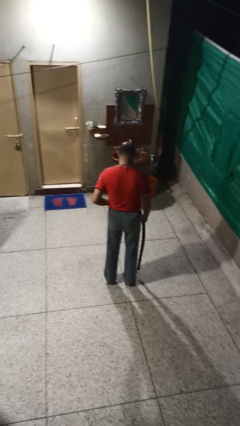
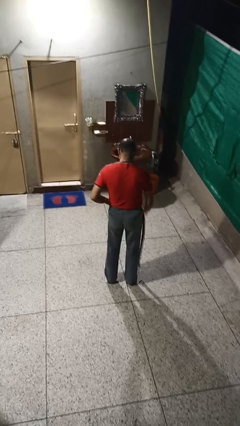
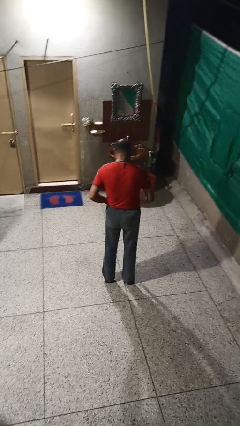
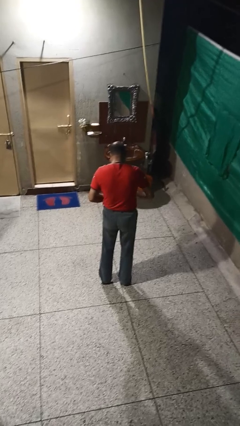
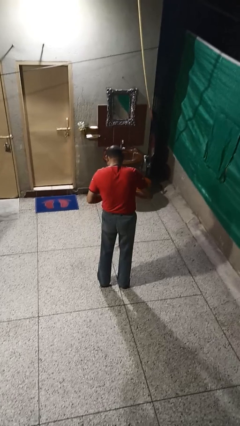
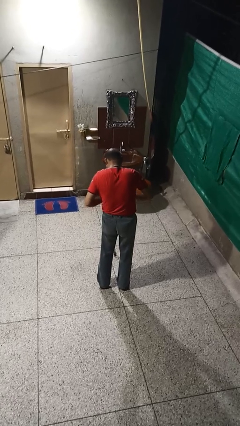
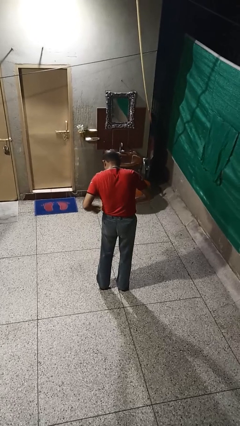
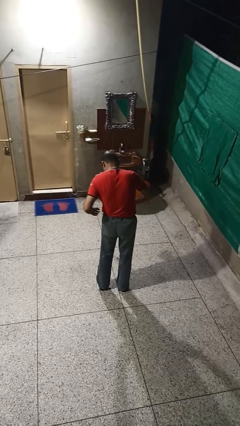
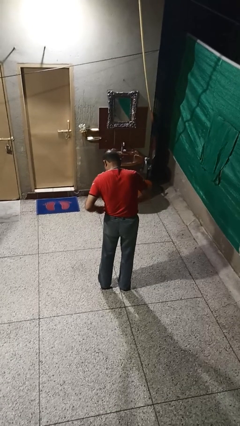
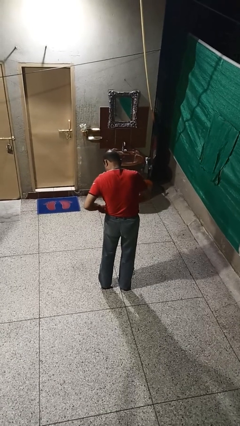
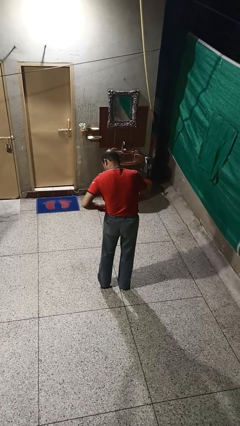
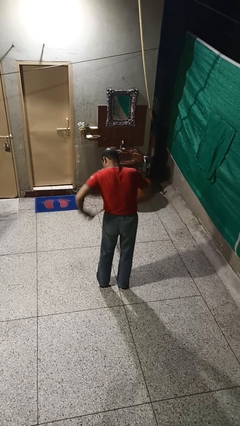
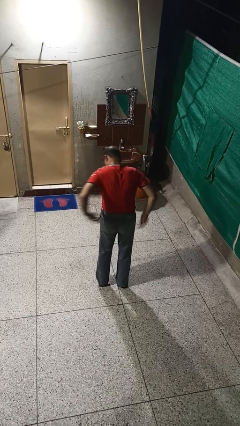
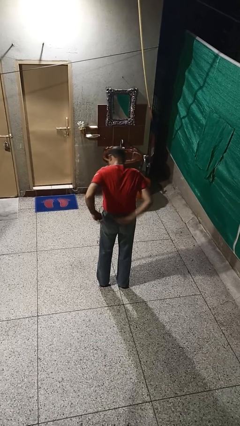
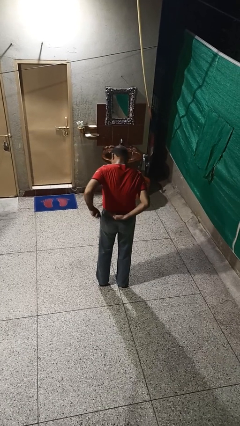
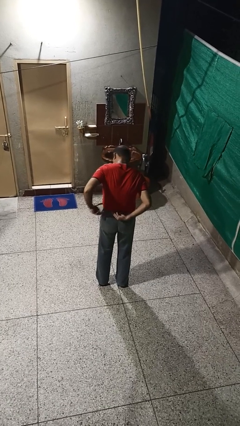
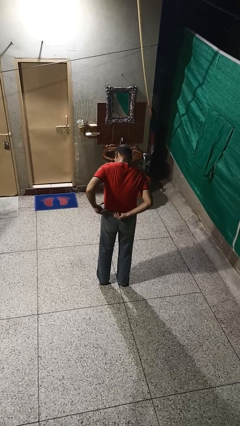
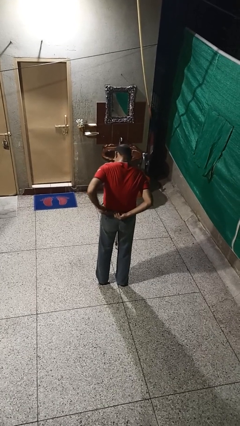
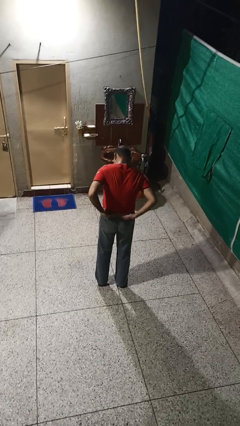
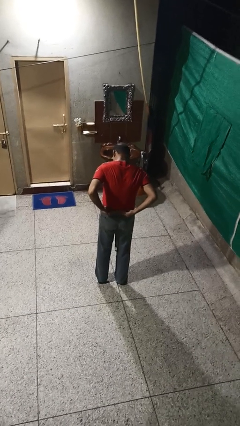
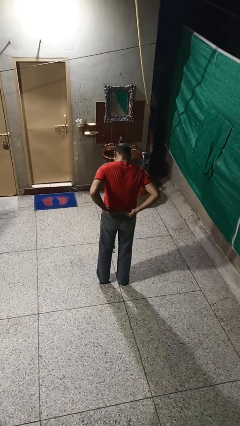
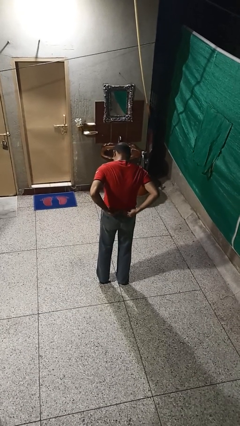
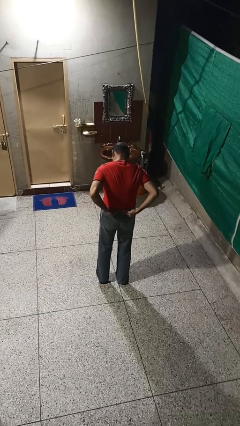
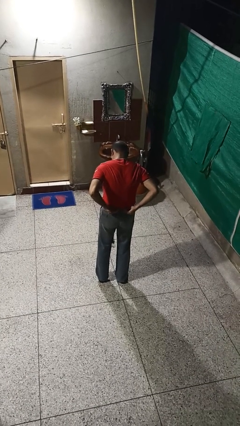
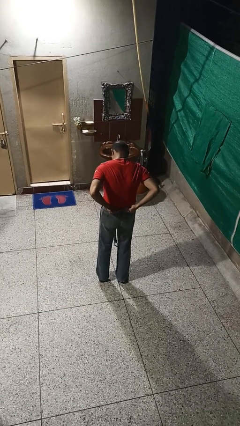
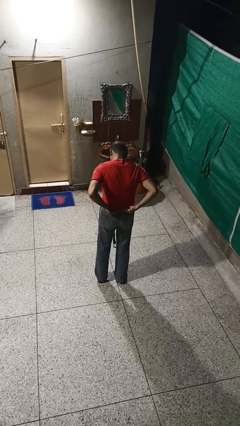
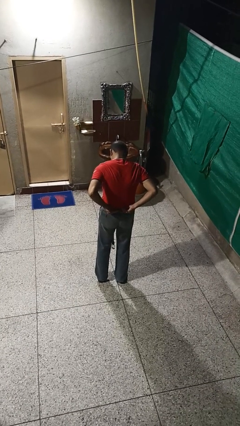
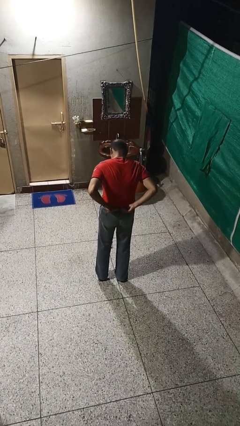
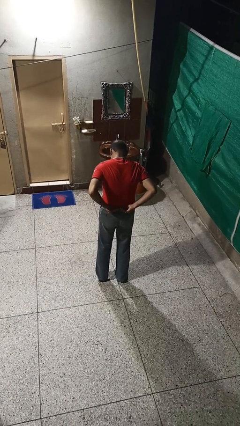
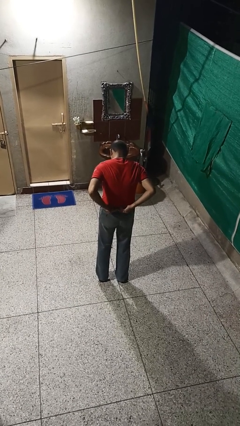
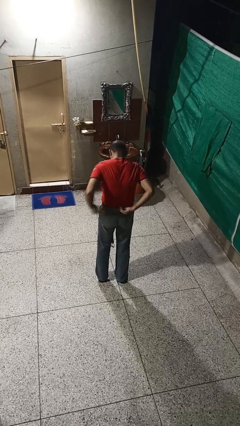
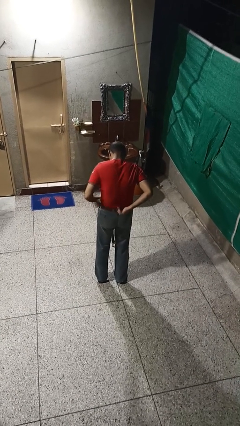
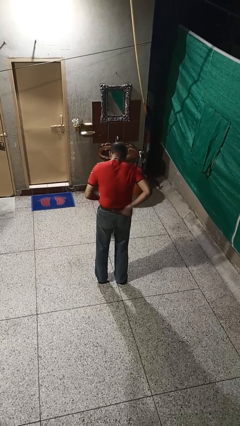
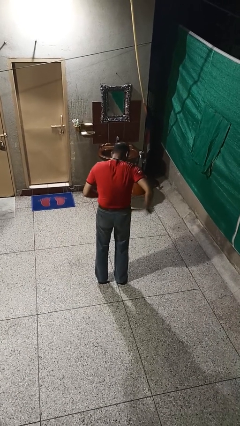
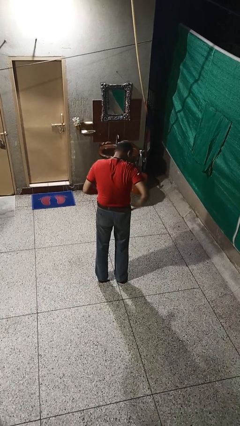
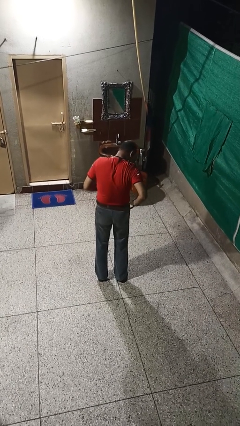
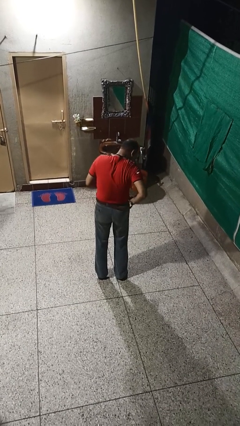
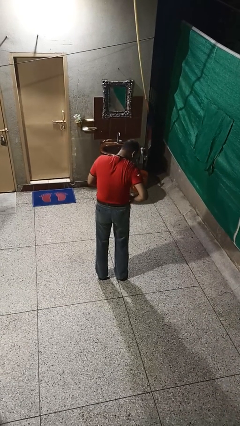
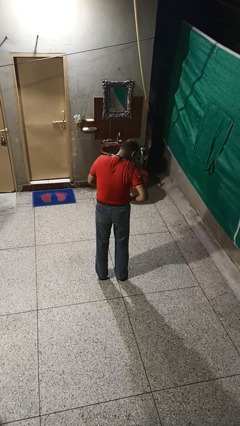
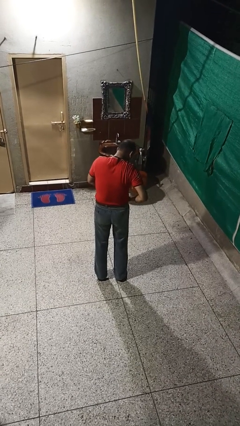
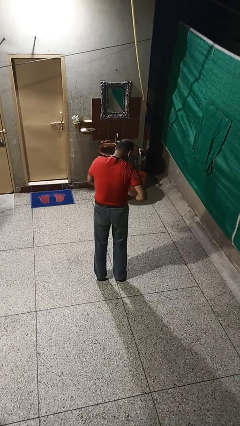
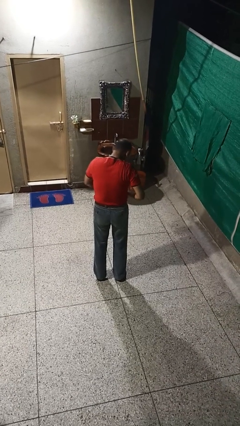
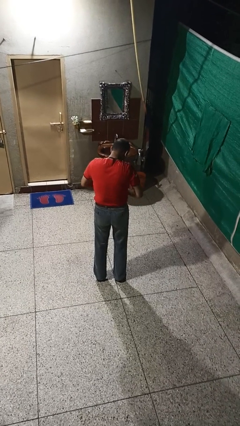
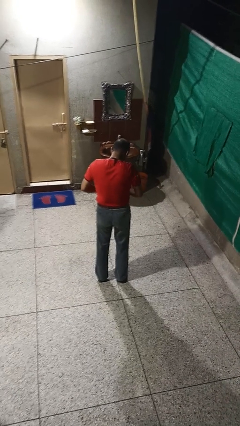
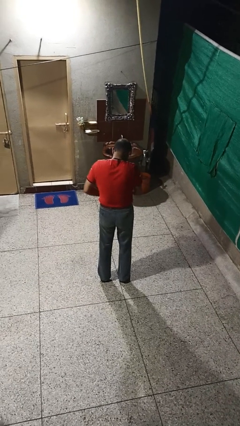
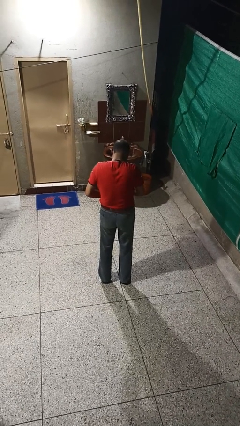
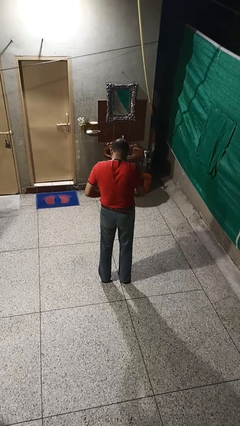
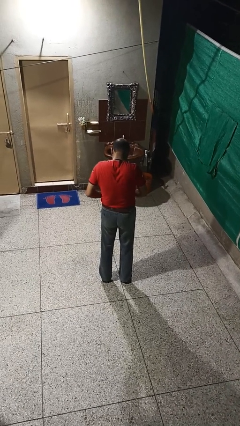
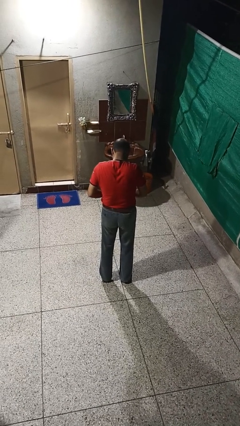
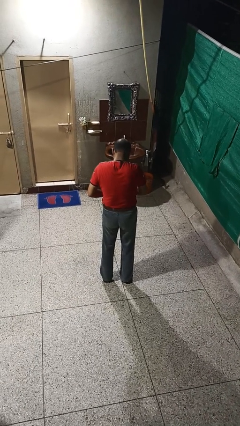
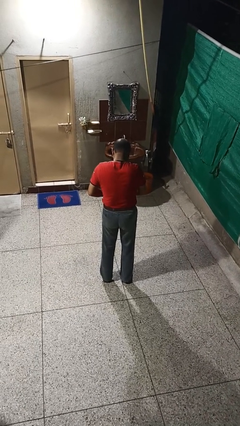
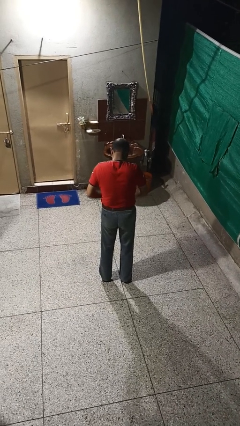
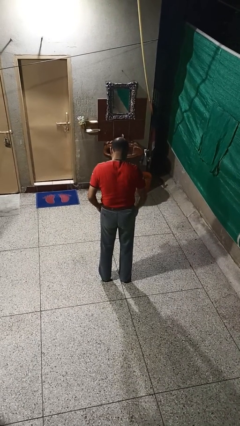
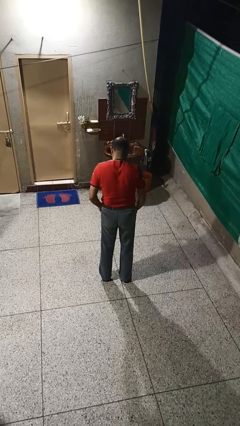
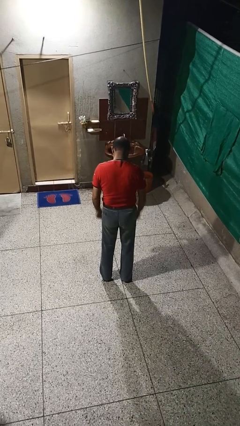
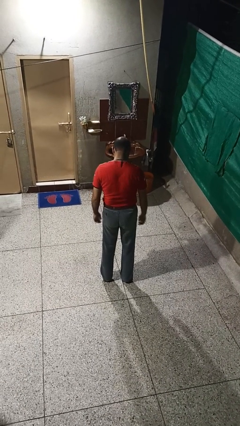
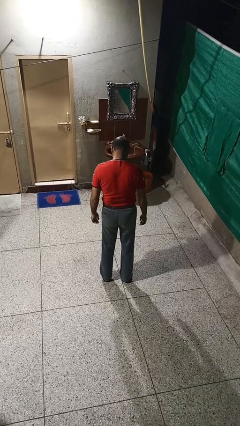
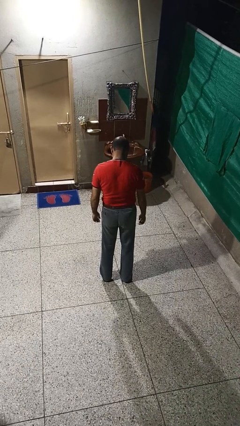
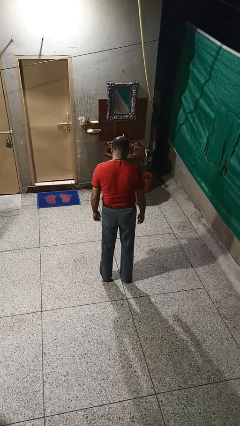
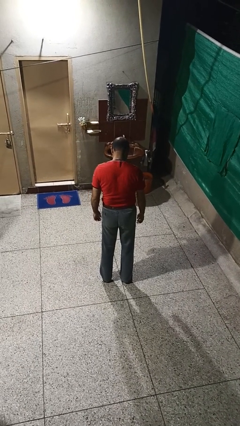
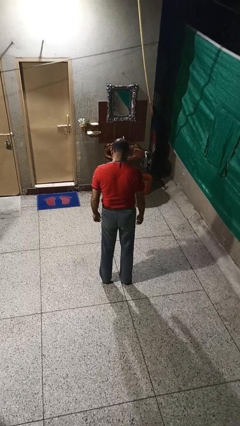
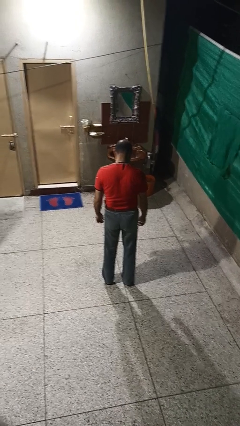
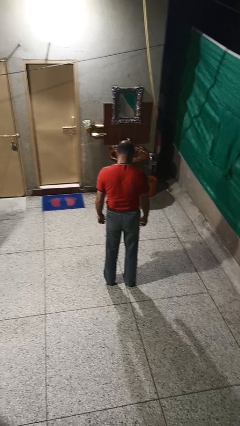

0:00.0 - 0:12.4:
person puts on belt

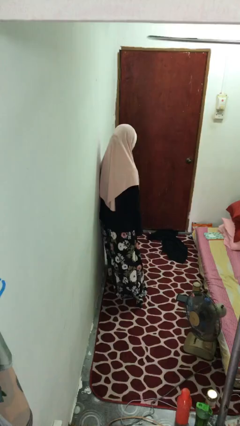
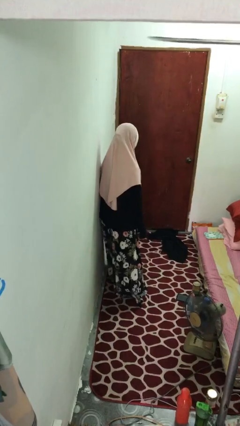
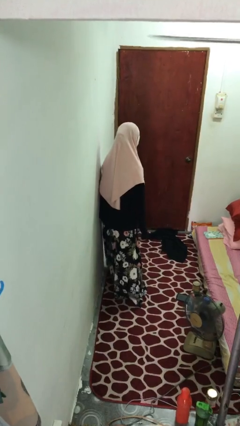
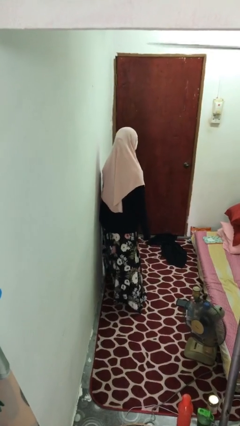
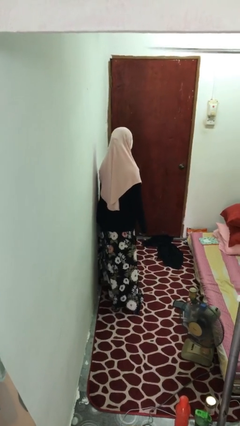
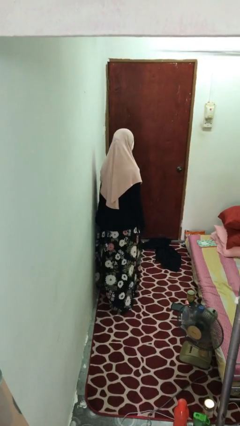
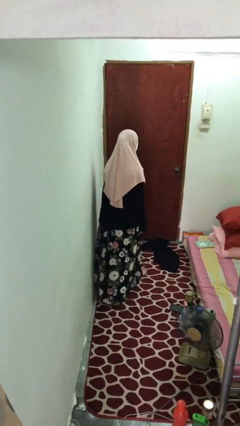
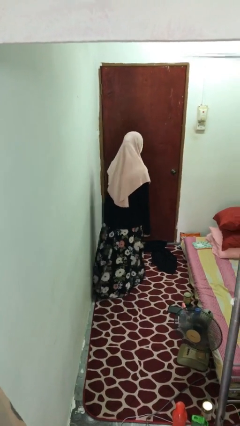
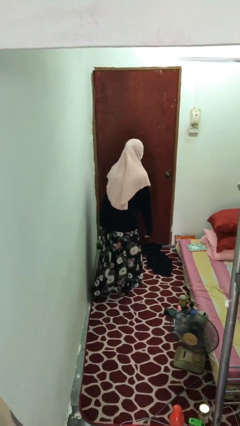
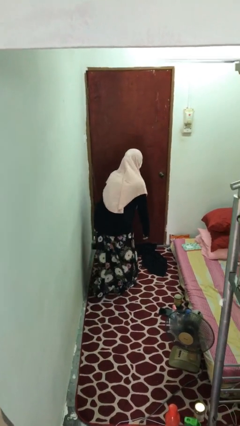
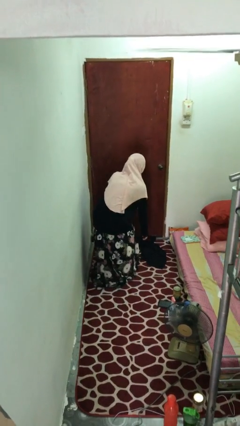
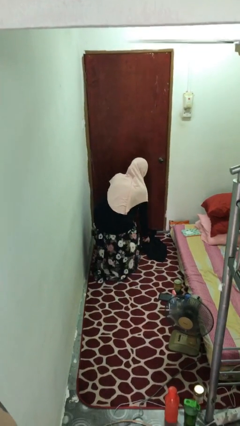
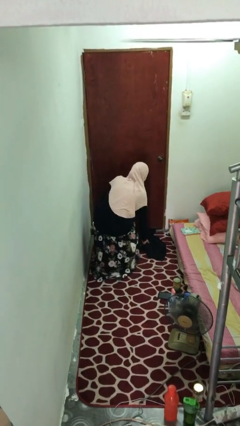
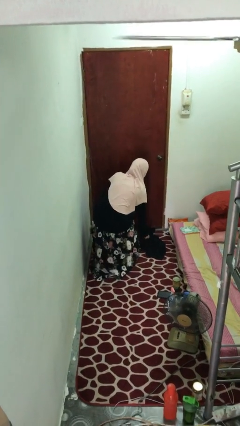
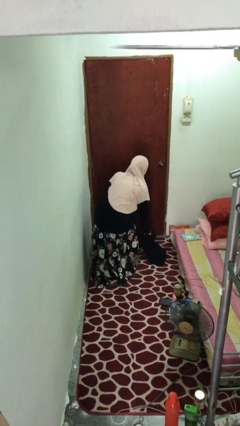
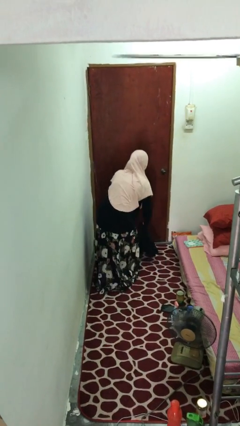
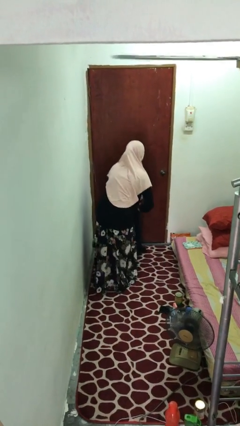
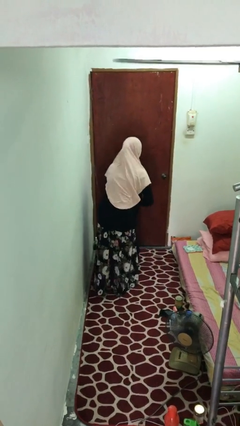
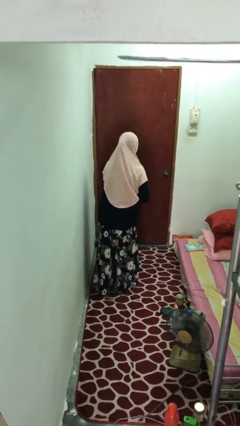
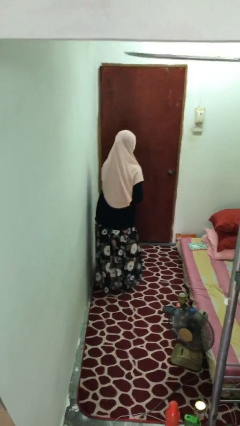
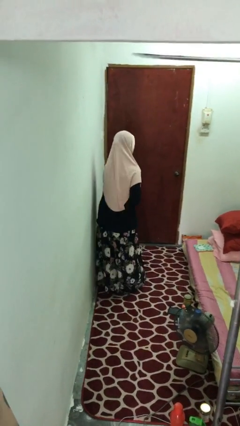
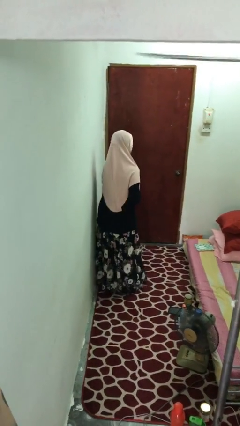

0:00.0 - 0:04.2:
person picks up object from floor

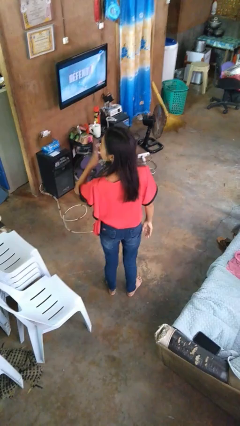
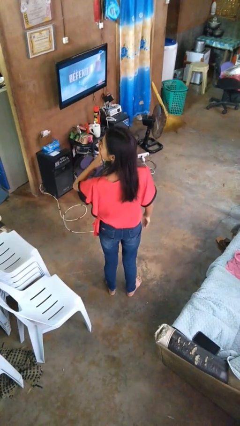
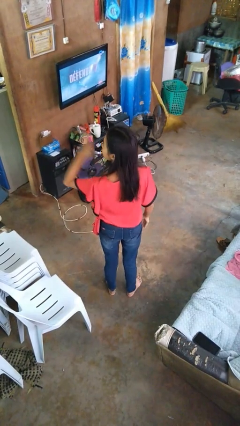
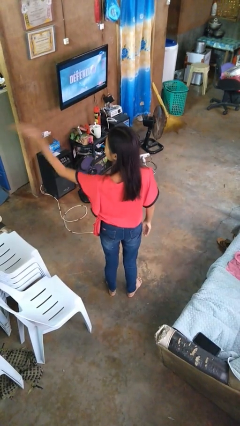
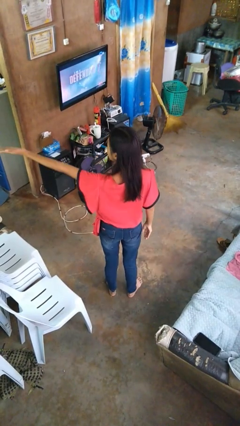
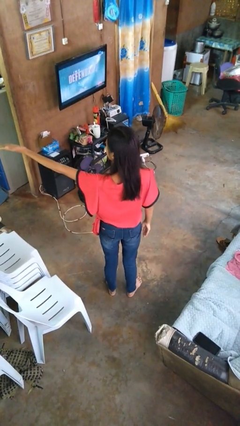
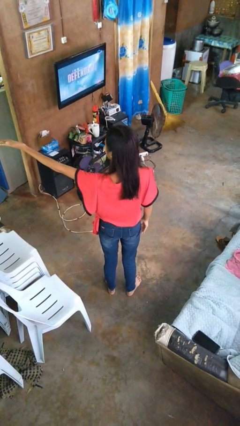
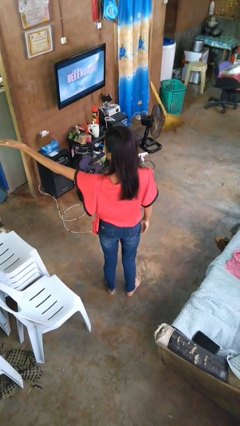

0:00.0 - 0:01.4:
person gestures blow kiss
